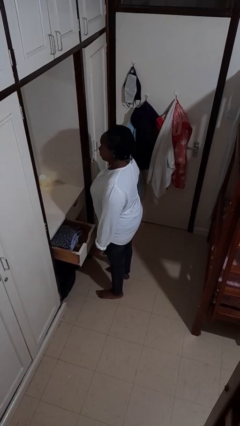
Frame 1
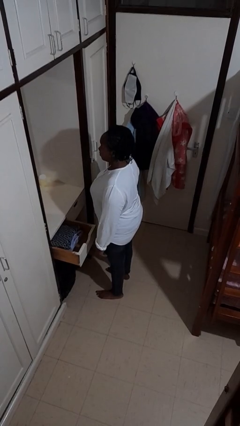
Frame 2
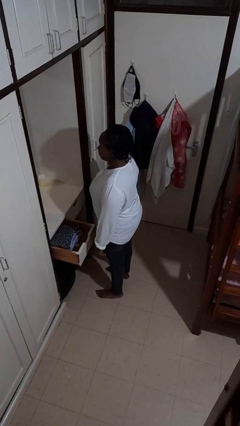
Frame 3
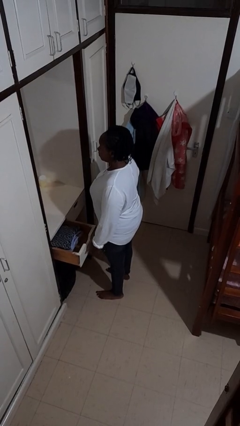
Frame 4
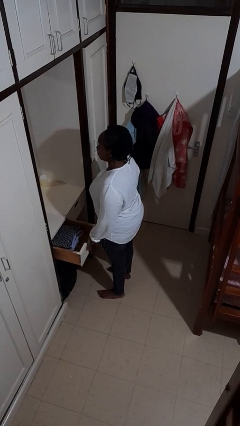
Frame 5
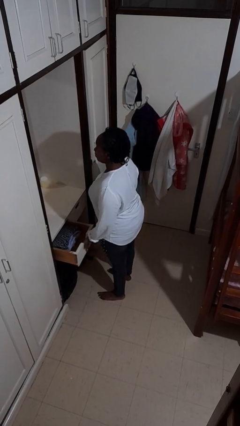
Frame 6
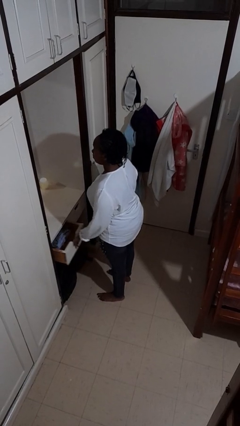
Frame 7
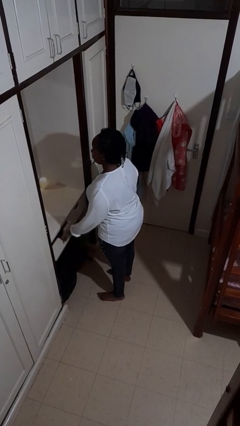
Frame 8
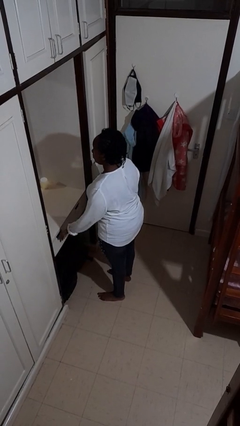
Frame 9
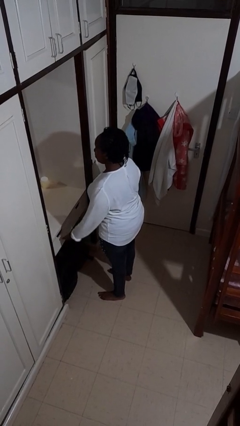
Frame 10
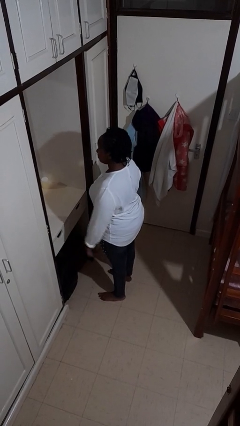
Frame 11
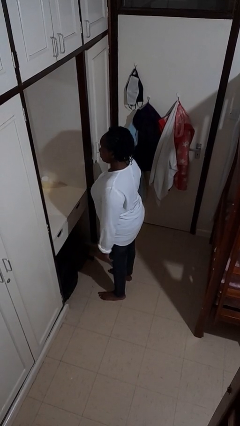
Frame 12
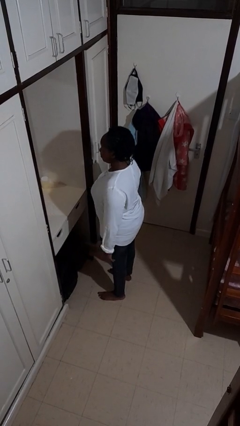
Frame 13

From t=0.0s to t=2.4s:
person closes dresser drawer

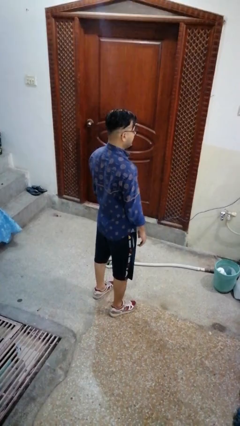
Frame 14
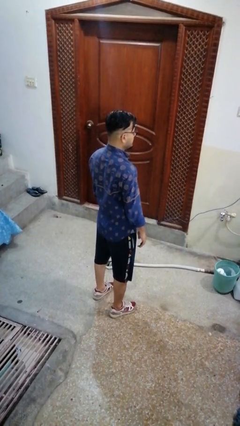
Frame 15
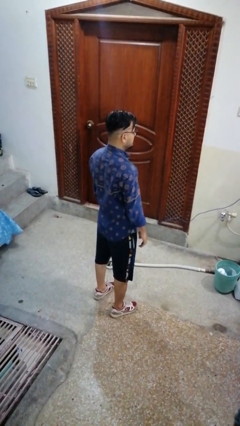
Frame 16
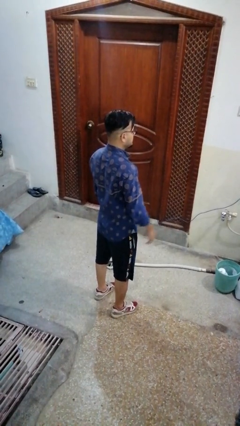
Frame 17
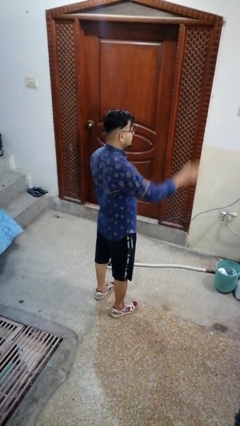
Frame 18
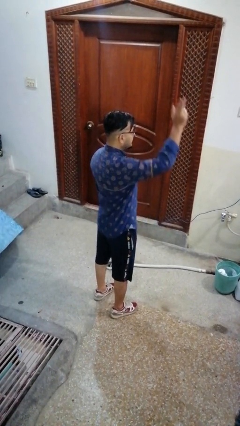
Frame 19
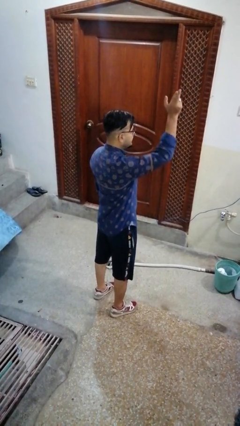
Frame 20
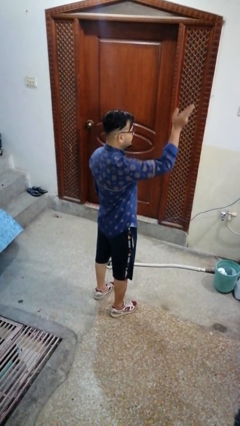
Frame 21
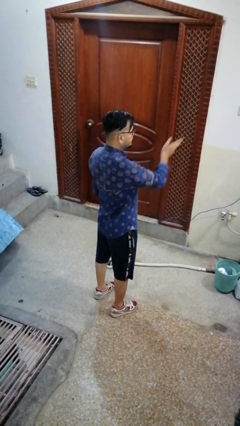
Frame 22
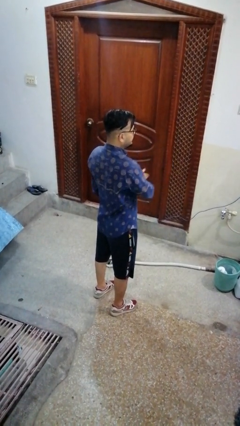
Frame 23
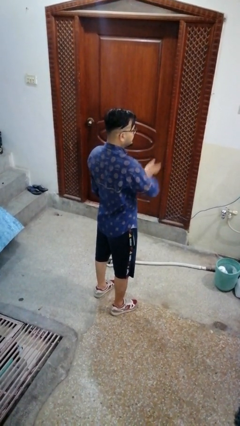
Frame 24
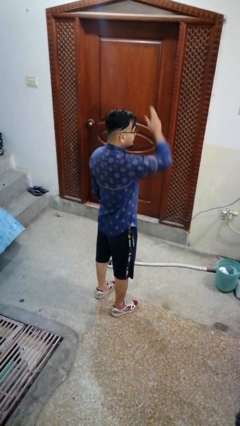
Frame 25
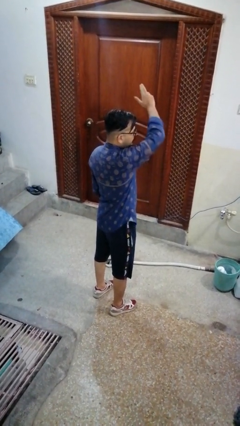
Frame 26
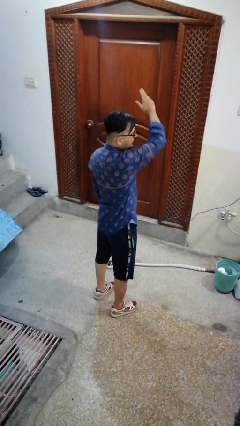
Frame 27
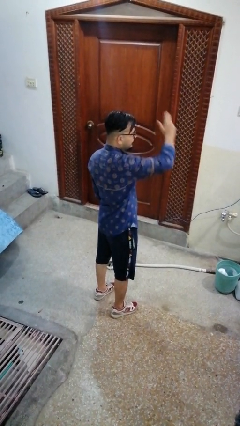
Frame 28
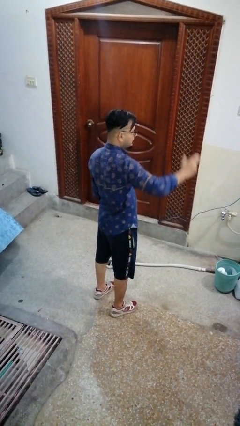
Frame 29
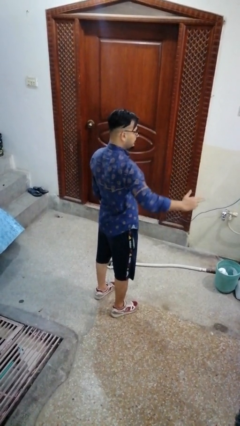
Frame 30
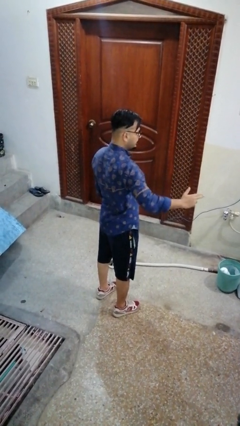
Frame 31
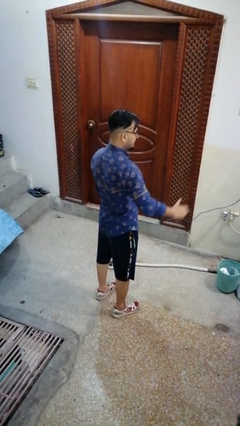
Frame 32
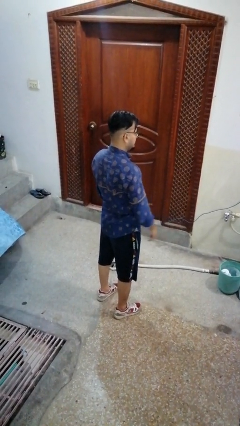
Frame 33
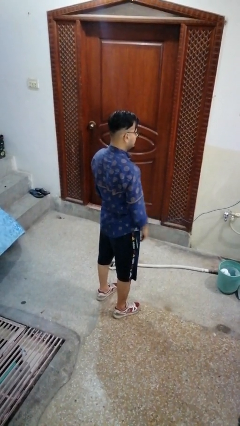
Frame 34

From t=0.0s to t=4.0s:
person gestures cut

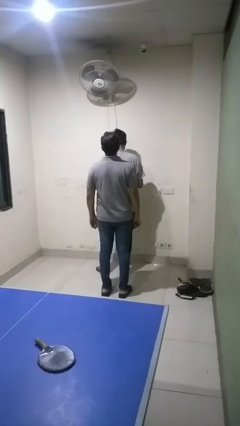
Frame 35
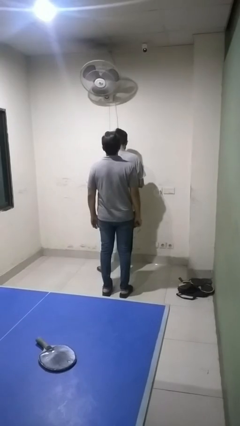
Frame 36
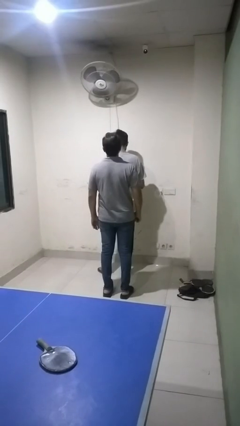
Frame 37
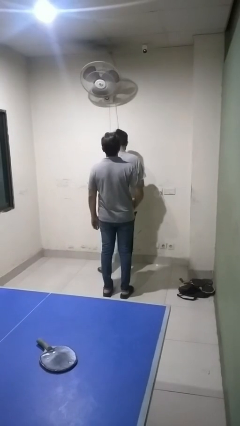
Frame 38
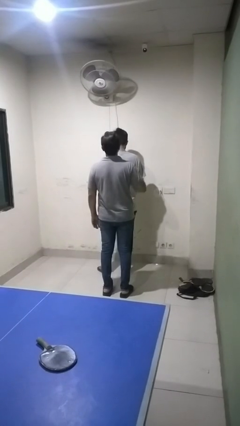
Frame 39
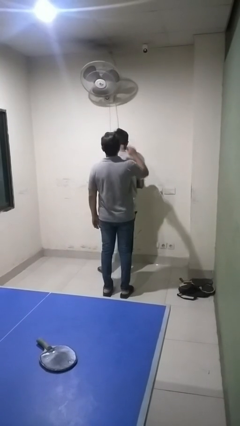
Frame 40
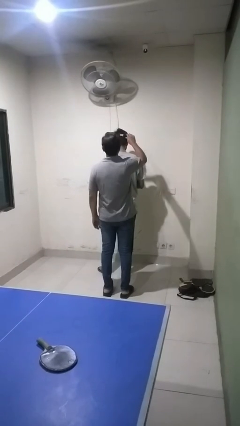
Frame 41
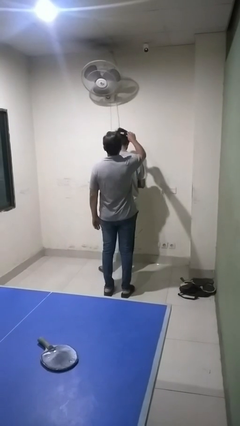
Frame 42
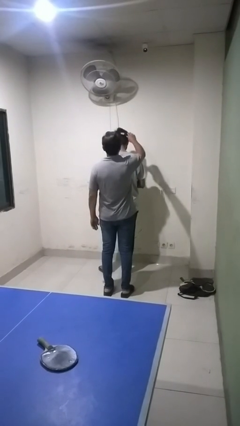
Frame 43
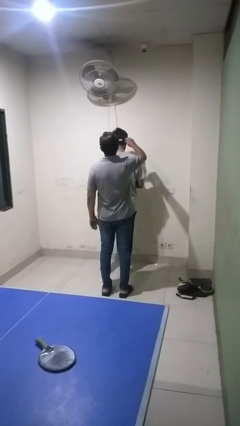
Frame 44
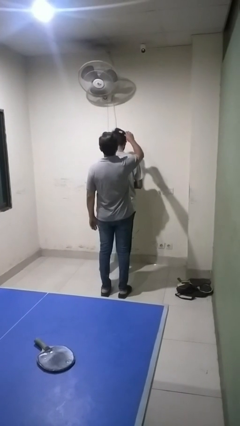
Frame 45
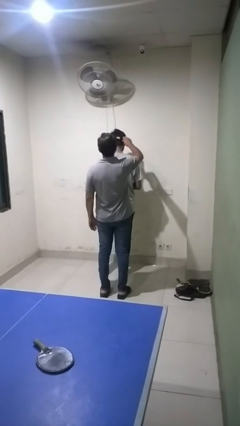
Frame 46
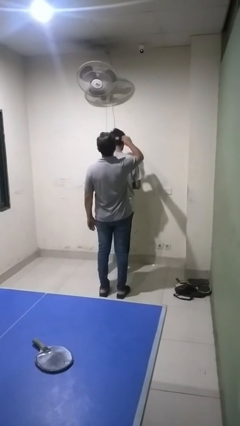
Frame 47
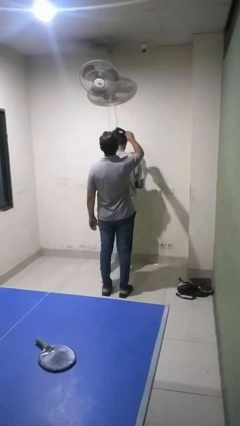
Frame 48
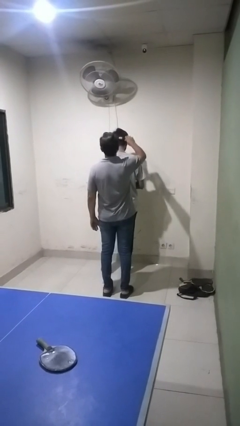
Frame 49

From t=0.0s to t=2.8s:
person brushes hair of person

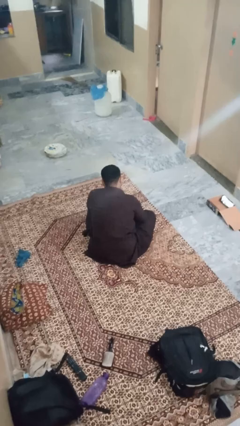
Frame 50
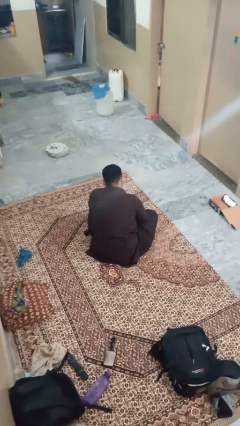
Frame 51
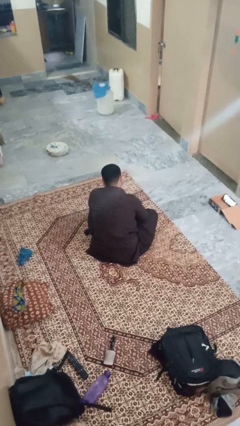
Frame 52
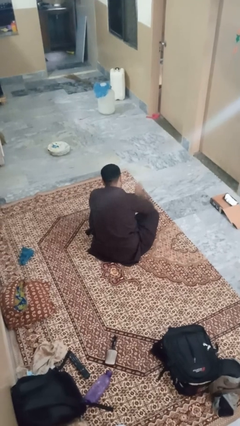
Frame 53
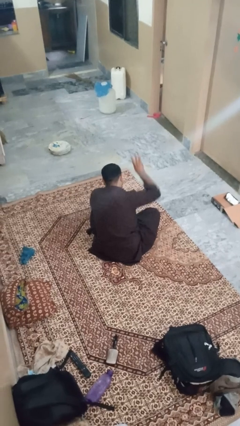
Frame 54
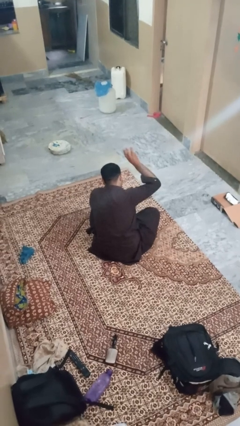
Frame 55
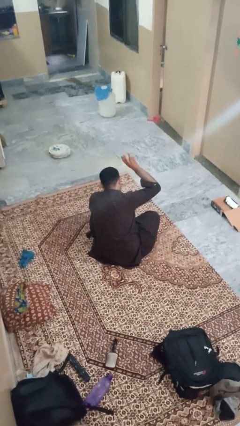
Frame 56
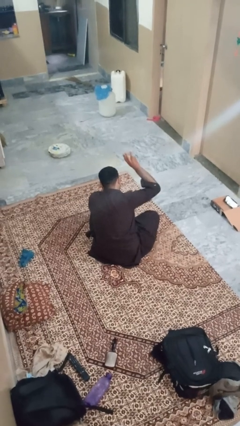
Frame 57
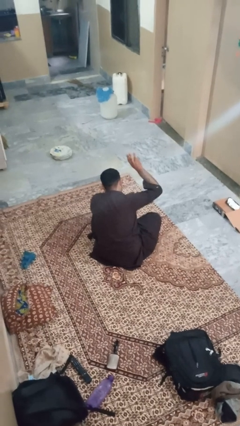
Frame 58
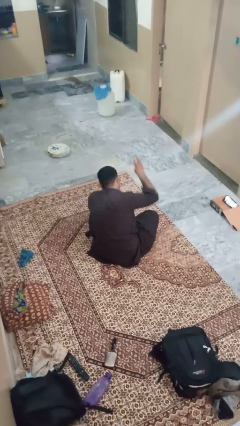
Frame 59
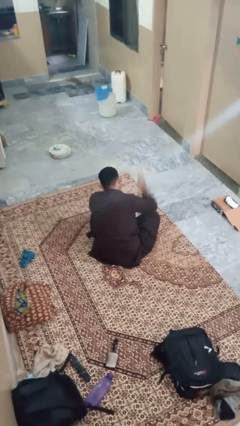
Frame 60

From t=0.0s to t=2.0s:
person gestures number three

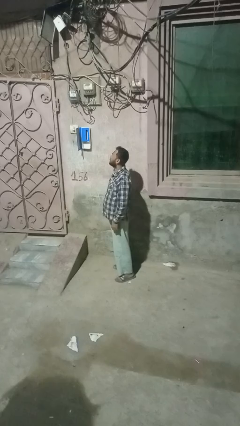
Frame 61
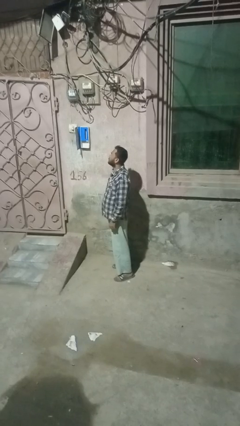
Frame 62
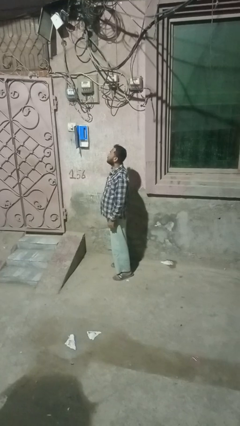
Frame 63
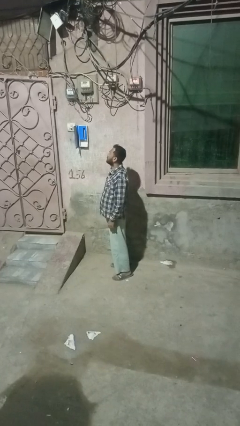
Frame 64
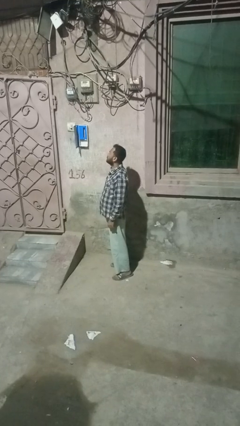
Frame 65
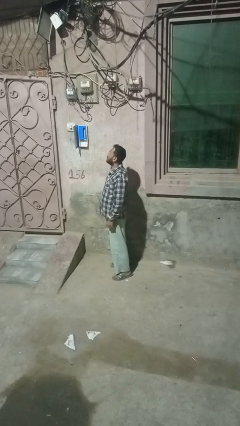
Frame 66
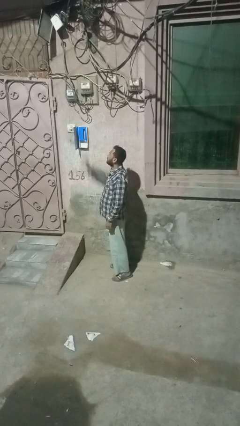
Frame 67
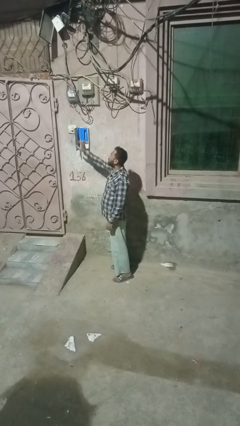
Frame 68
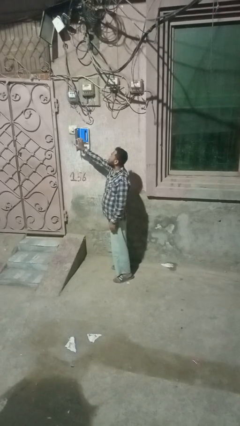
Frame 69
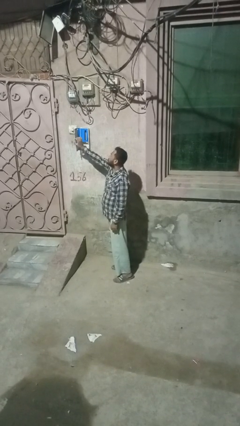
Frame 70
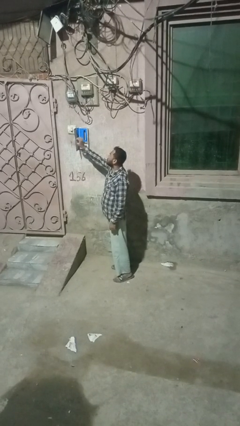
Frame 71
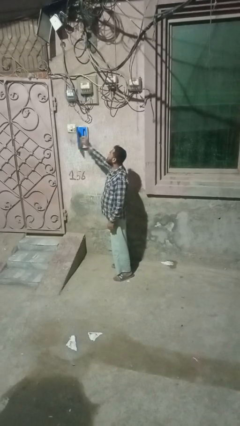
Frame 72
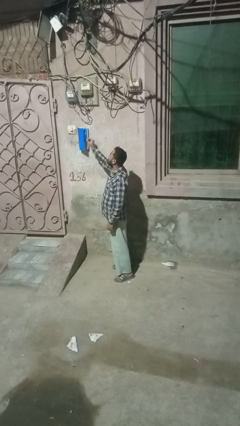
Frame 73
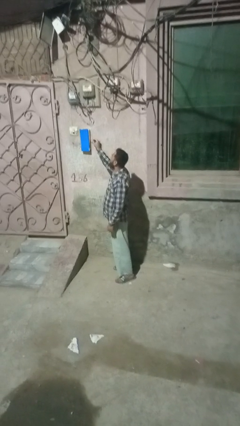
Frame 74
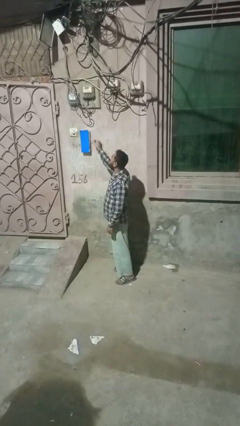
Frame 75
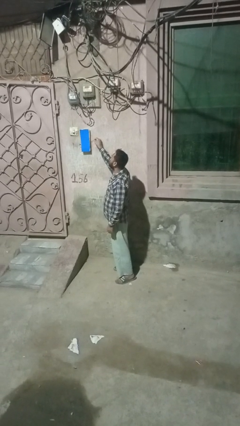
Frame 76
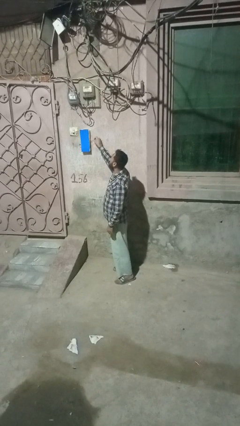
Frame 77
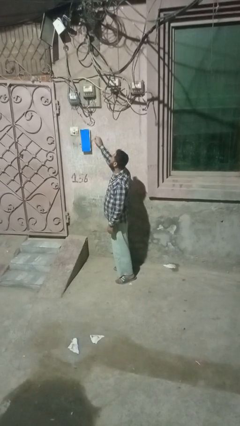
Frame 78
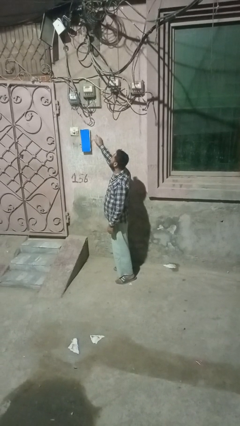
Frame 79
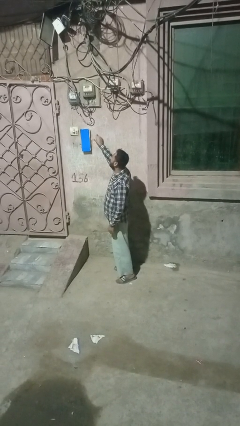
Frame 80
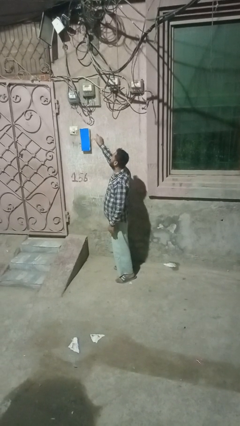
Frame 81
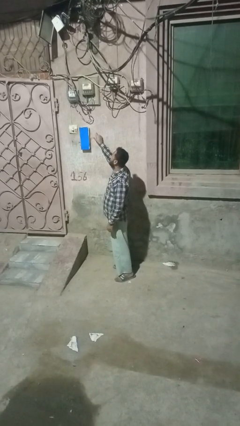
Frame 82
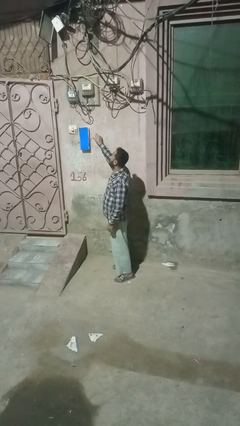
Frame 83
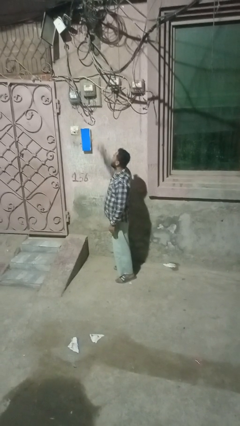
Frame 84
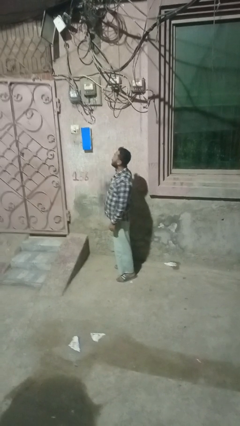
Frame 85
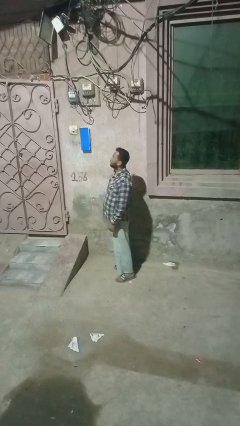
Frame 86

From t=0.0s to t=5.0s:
person closes mailbox

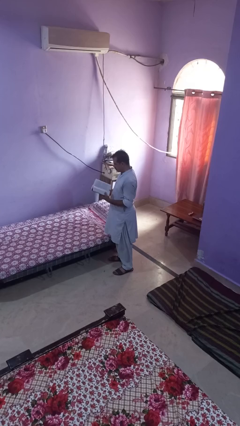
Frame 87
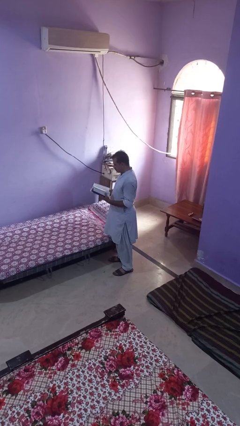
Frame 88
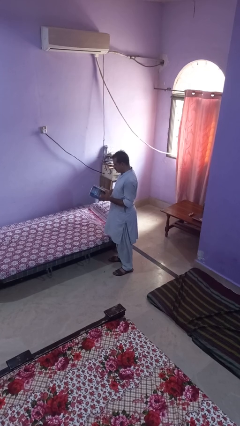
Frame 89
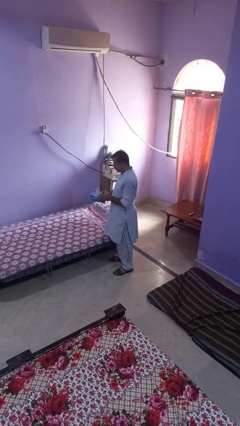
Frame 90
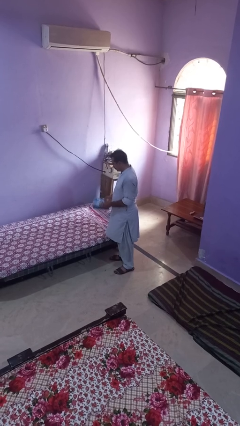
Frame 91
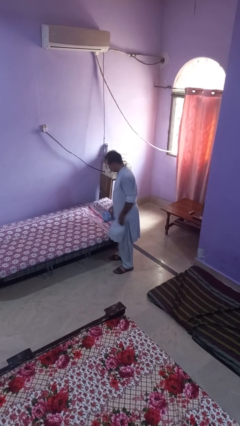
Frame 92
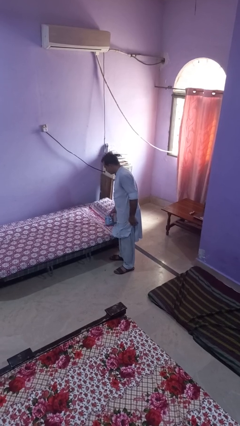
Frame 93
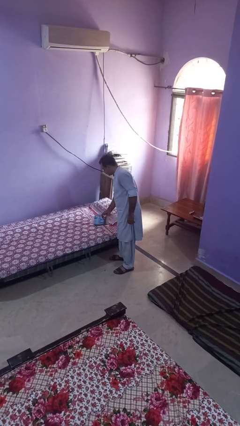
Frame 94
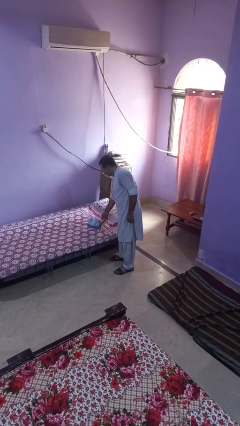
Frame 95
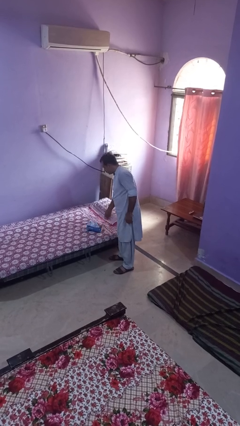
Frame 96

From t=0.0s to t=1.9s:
person puts down object on bed
